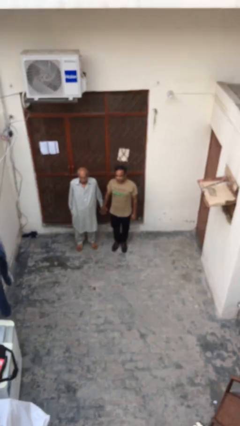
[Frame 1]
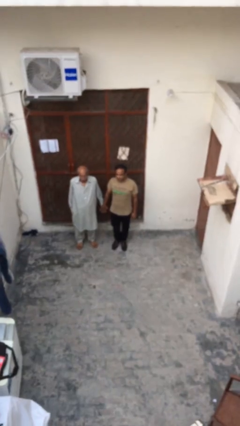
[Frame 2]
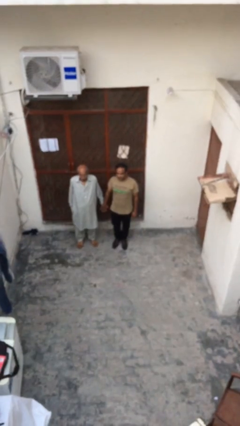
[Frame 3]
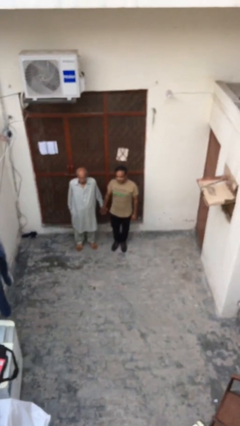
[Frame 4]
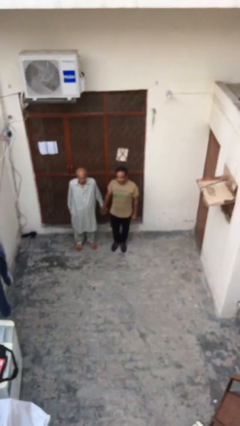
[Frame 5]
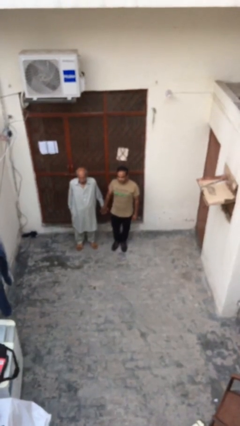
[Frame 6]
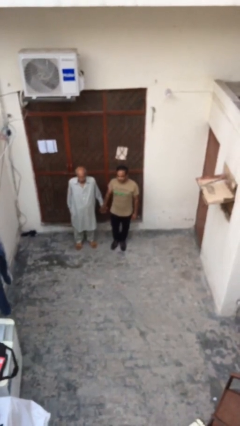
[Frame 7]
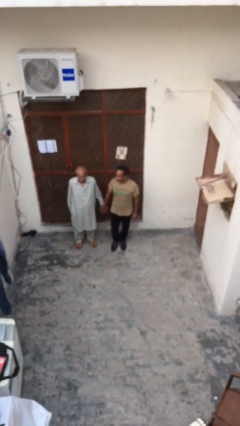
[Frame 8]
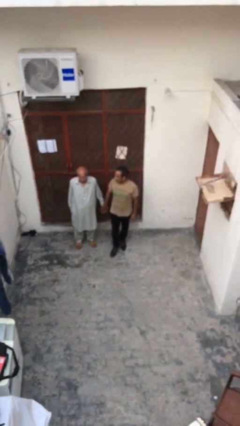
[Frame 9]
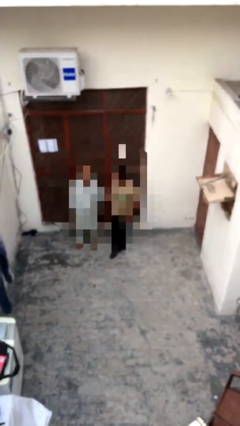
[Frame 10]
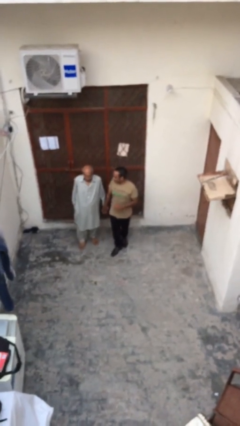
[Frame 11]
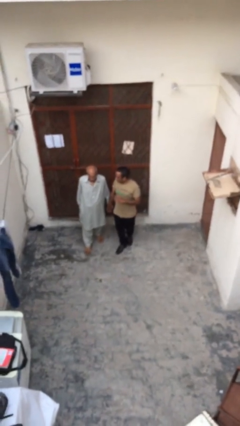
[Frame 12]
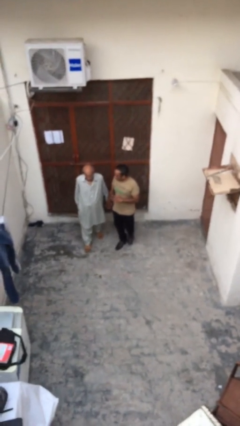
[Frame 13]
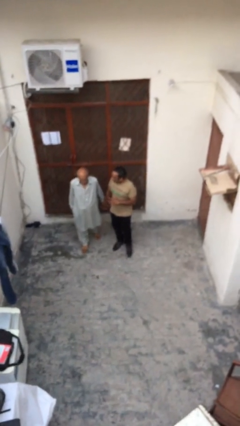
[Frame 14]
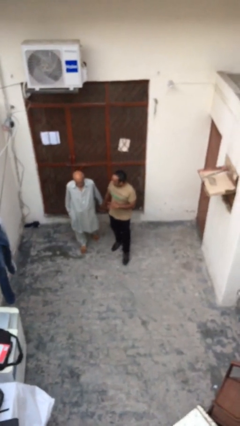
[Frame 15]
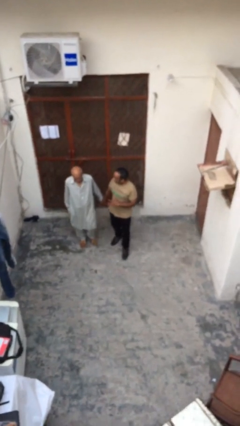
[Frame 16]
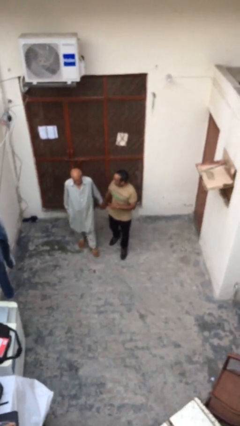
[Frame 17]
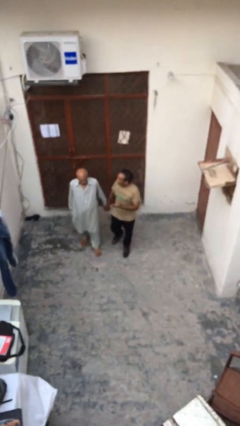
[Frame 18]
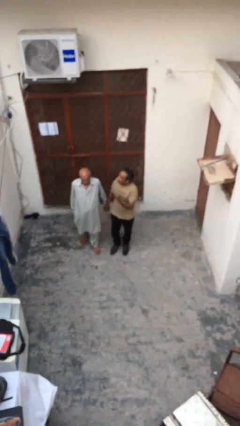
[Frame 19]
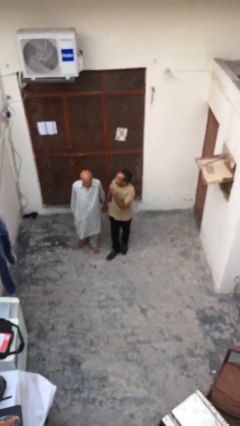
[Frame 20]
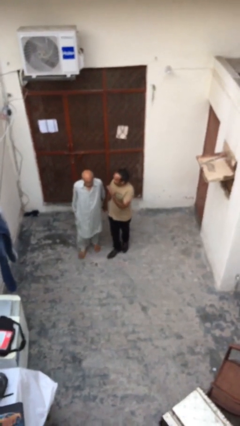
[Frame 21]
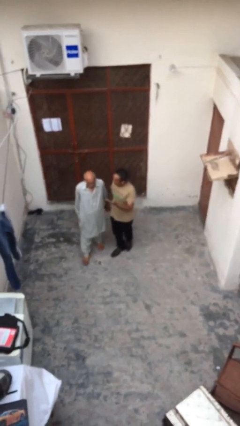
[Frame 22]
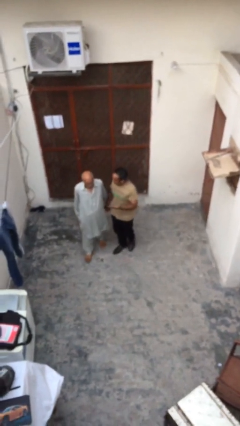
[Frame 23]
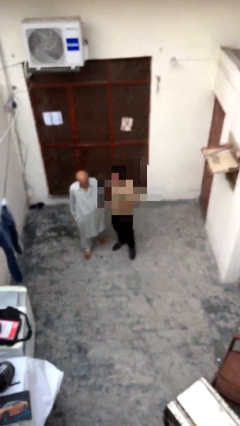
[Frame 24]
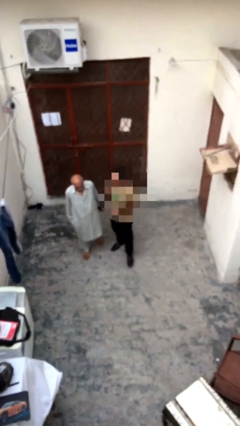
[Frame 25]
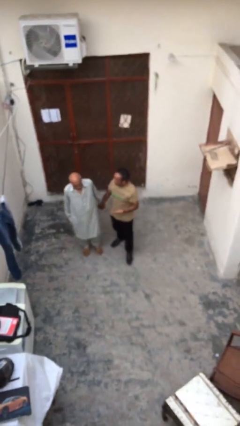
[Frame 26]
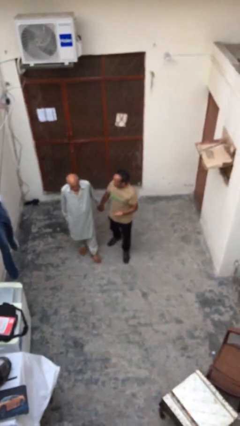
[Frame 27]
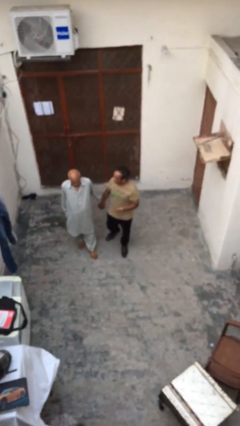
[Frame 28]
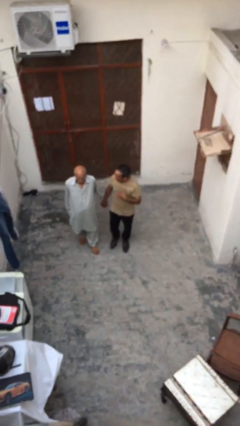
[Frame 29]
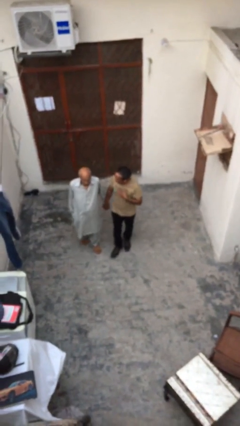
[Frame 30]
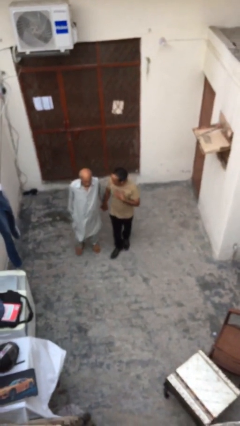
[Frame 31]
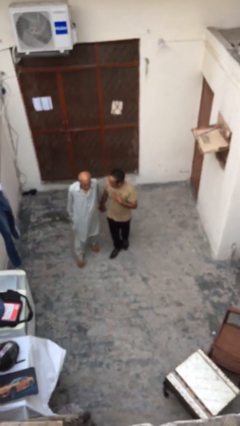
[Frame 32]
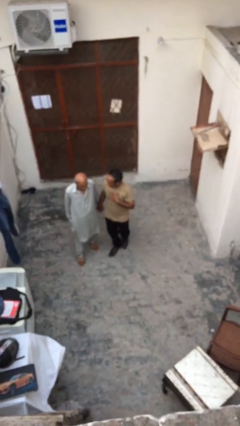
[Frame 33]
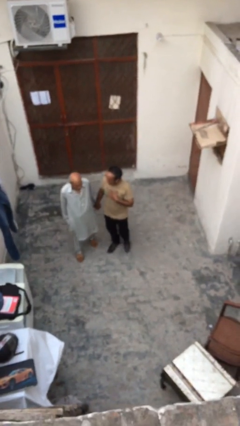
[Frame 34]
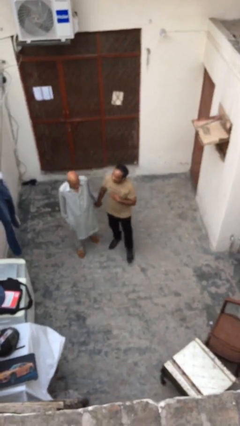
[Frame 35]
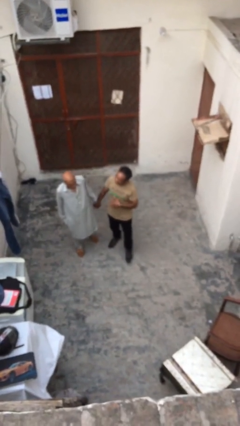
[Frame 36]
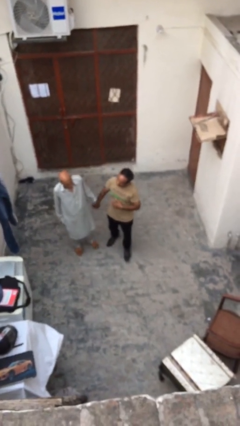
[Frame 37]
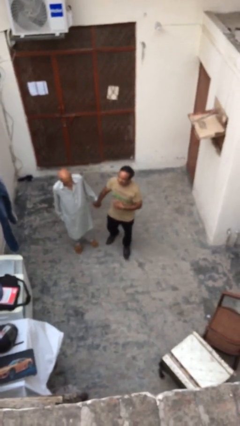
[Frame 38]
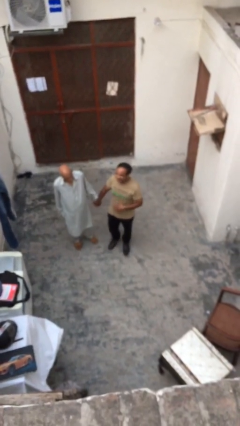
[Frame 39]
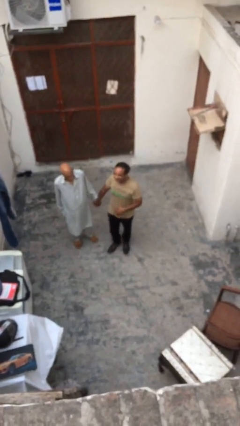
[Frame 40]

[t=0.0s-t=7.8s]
person holds hand

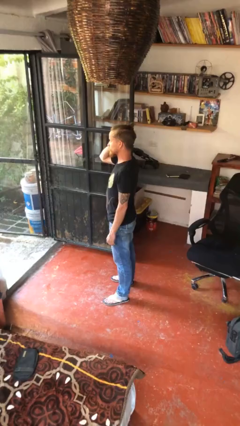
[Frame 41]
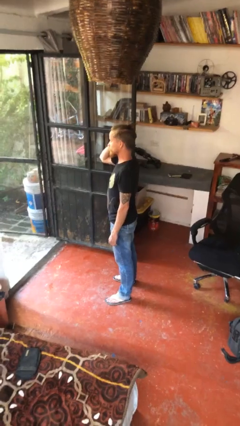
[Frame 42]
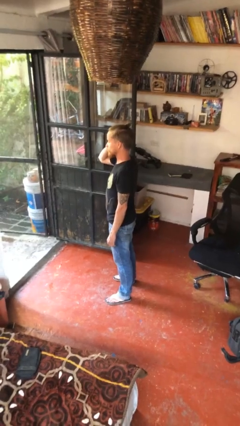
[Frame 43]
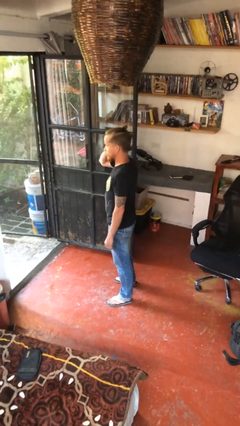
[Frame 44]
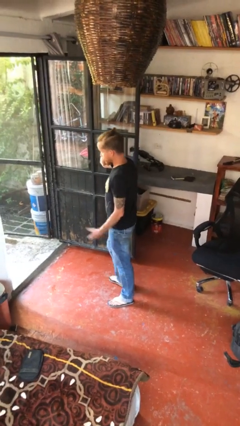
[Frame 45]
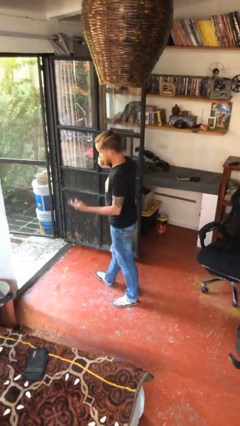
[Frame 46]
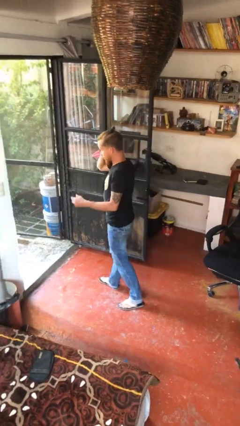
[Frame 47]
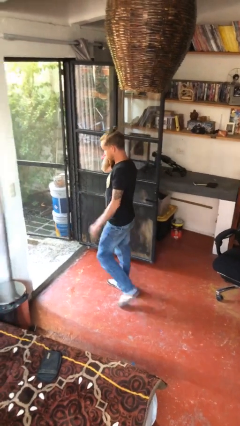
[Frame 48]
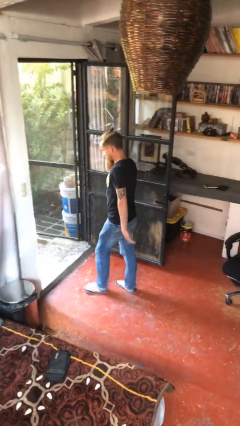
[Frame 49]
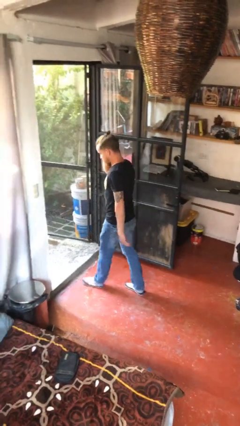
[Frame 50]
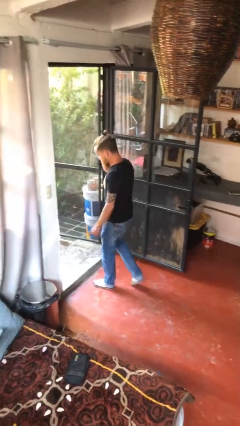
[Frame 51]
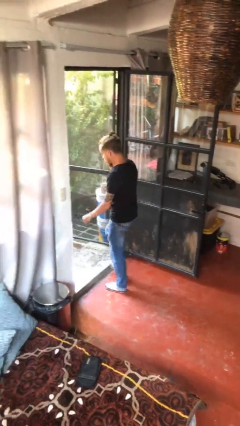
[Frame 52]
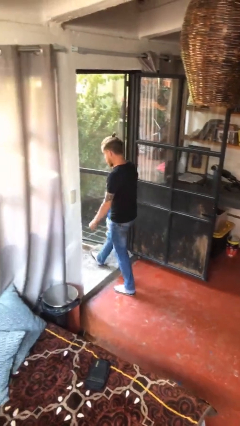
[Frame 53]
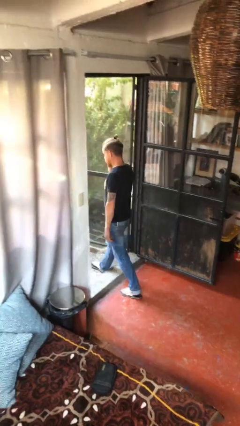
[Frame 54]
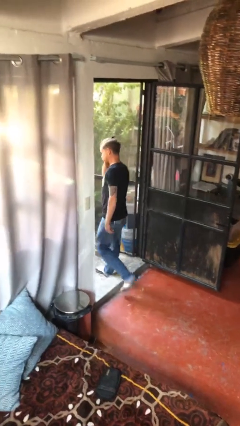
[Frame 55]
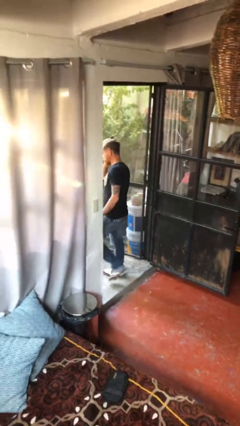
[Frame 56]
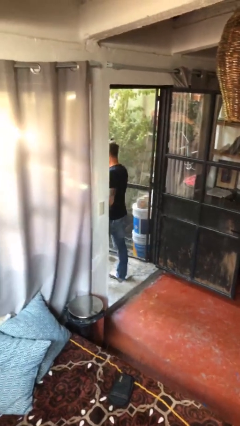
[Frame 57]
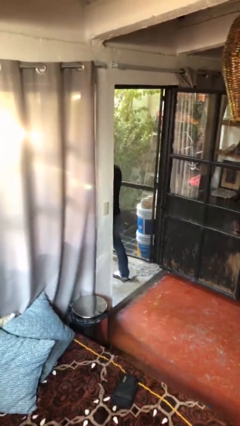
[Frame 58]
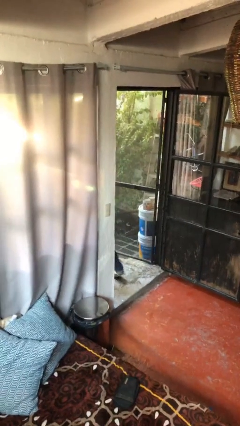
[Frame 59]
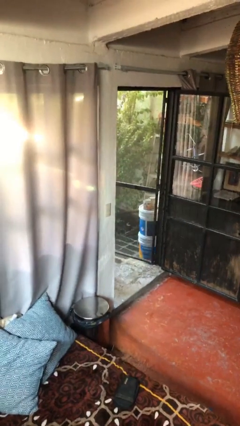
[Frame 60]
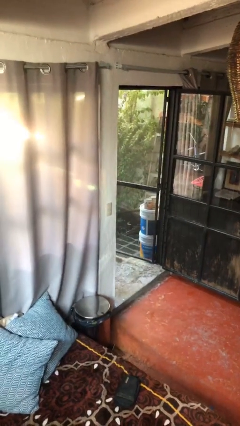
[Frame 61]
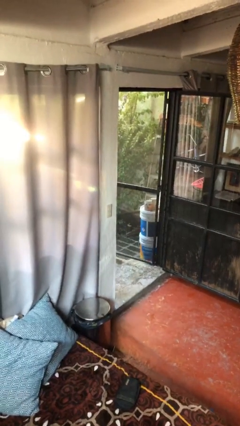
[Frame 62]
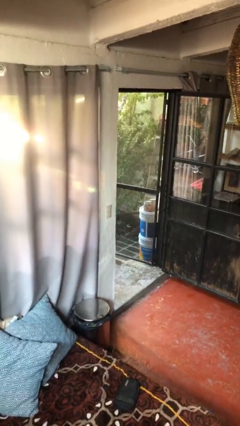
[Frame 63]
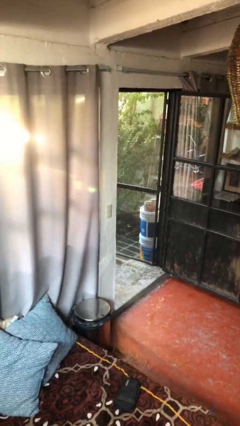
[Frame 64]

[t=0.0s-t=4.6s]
person exits scene through structure

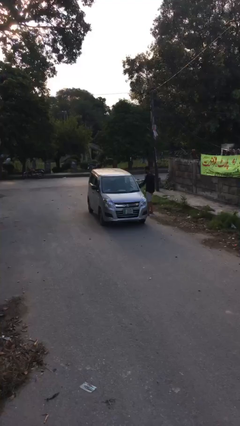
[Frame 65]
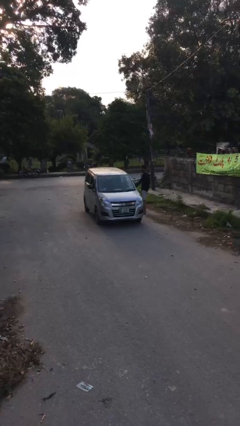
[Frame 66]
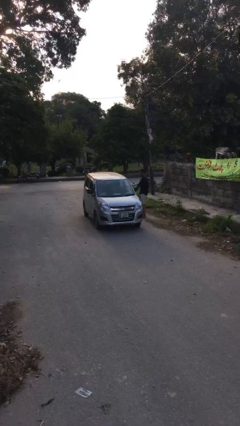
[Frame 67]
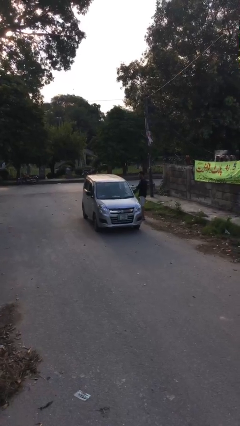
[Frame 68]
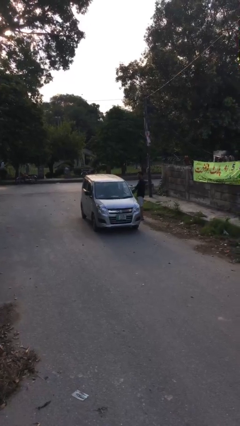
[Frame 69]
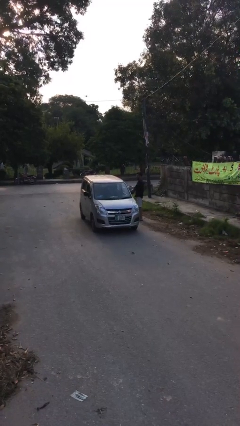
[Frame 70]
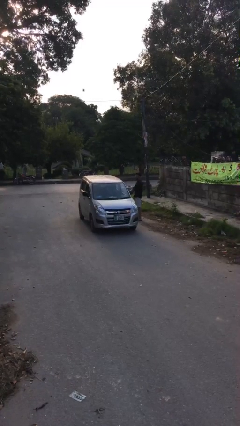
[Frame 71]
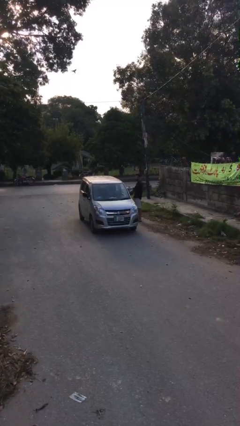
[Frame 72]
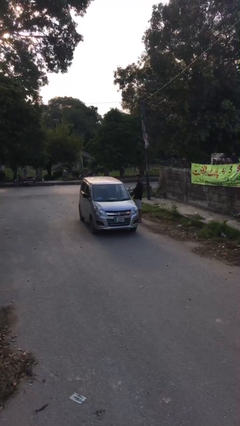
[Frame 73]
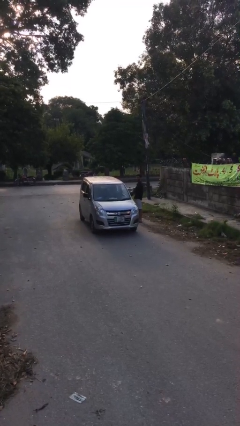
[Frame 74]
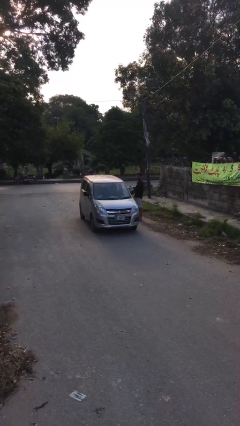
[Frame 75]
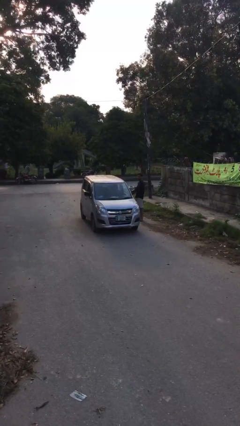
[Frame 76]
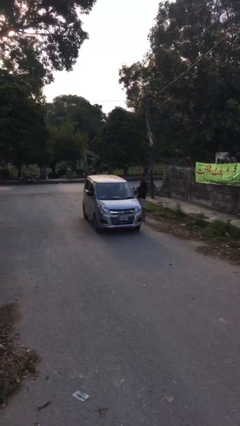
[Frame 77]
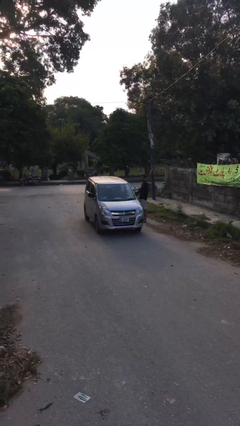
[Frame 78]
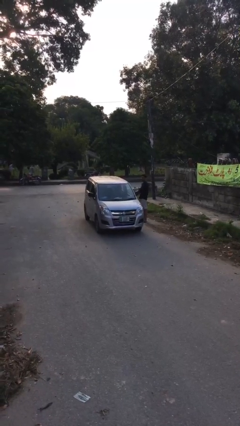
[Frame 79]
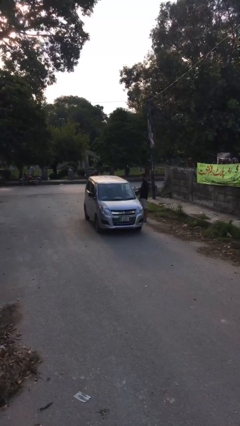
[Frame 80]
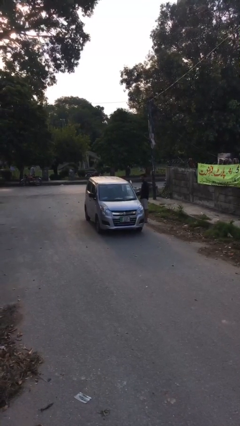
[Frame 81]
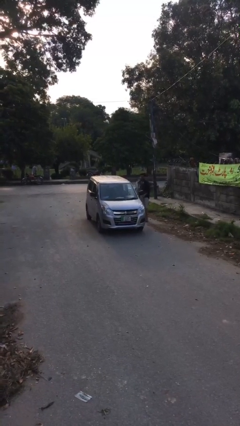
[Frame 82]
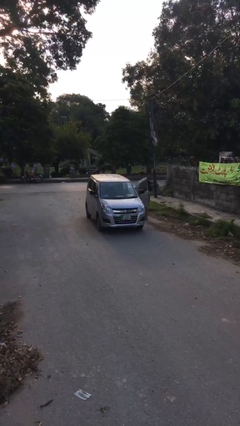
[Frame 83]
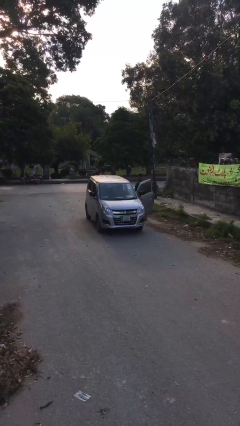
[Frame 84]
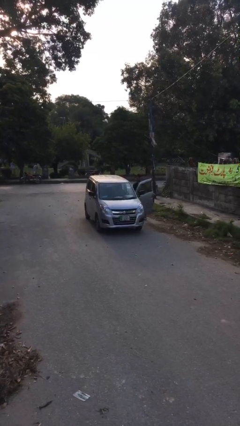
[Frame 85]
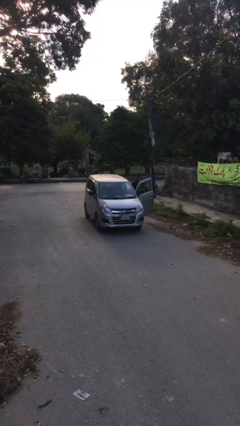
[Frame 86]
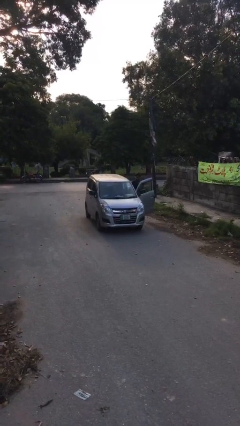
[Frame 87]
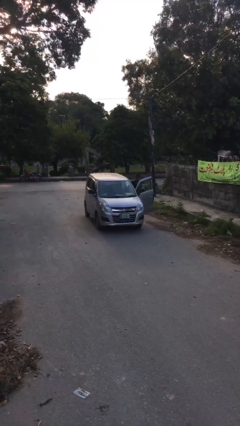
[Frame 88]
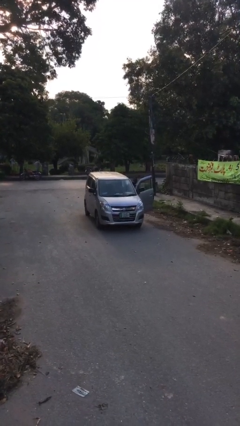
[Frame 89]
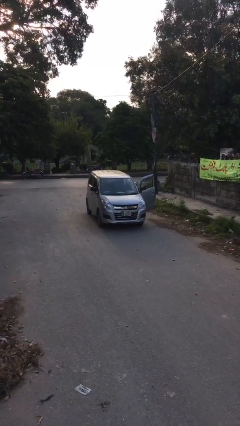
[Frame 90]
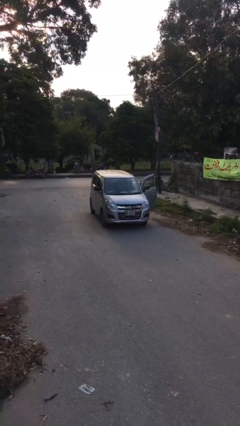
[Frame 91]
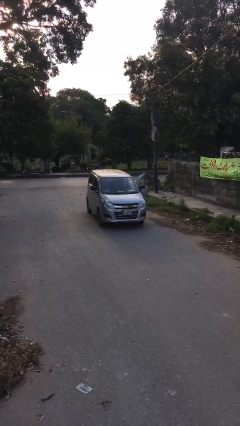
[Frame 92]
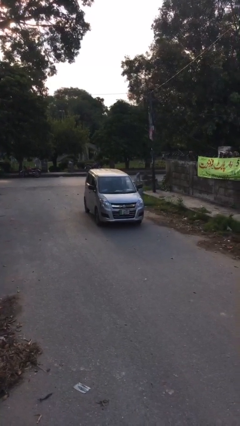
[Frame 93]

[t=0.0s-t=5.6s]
car picks up person
